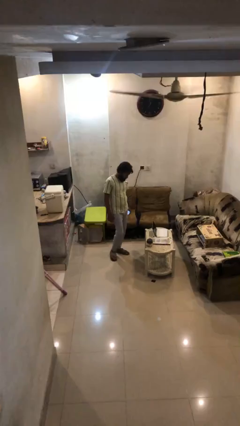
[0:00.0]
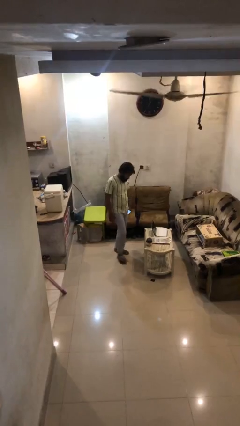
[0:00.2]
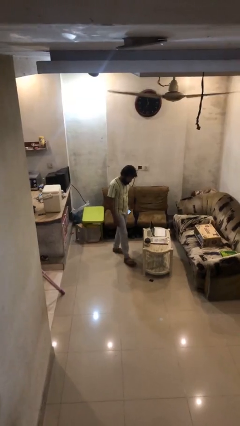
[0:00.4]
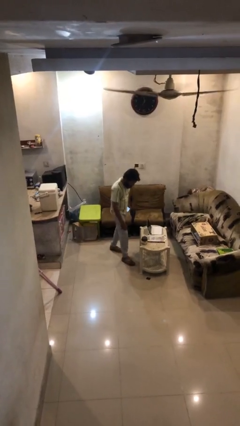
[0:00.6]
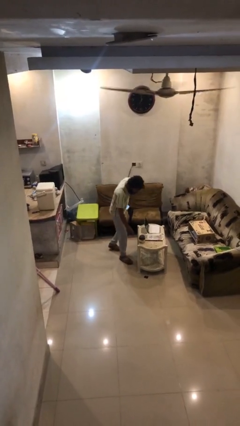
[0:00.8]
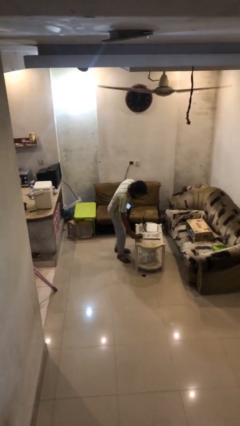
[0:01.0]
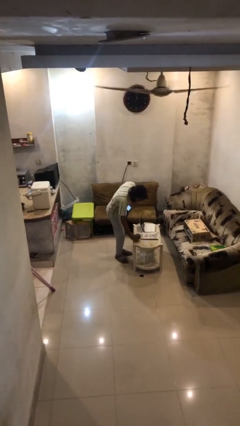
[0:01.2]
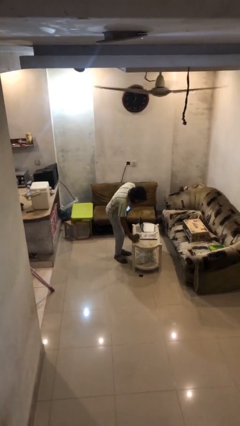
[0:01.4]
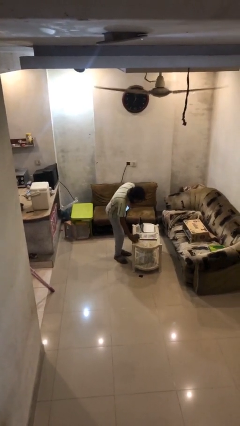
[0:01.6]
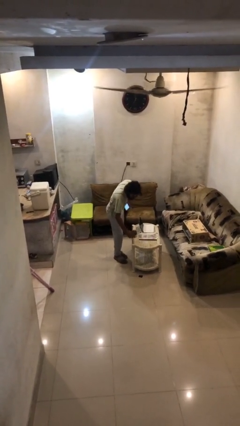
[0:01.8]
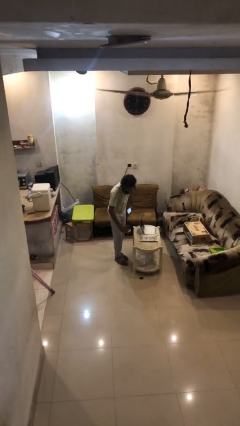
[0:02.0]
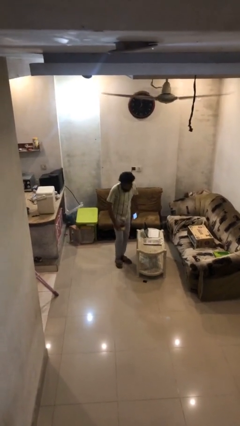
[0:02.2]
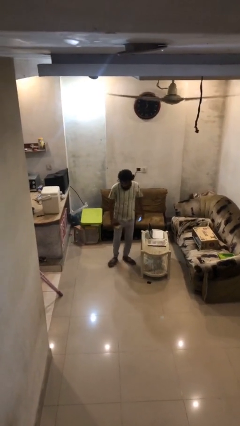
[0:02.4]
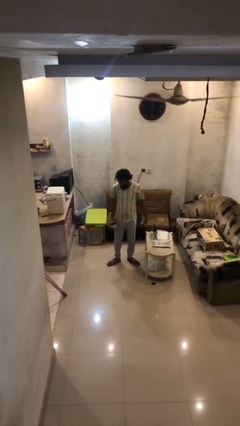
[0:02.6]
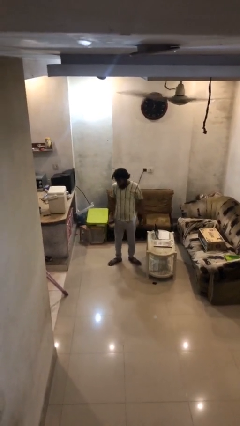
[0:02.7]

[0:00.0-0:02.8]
person picks up object from table

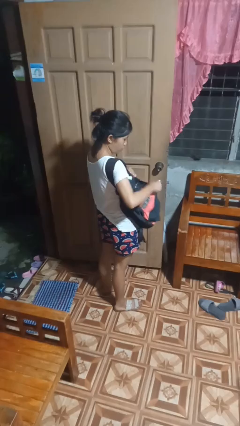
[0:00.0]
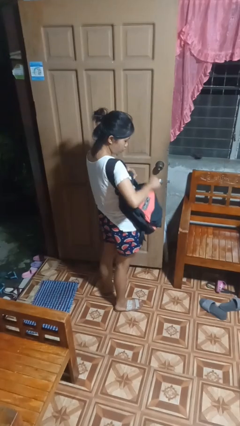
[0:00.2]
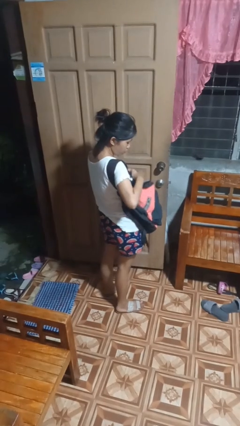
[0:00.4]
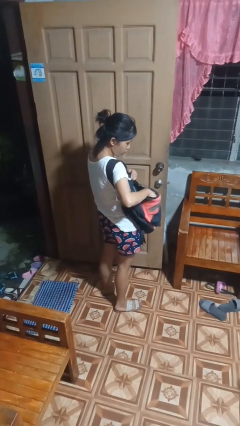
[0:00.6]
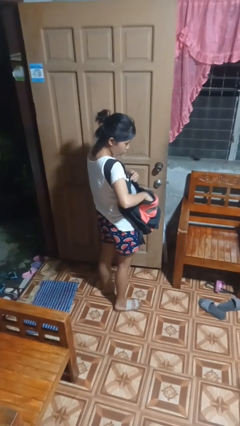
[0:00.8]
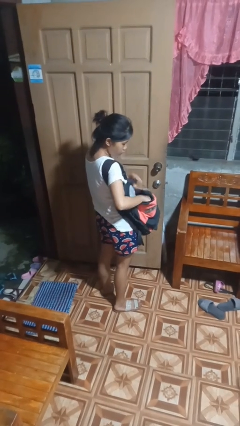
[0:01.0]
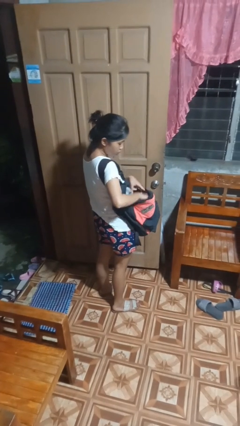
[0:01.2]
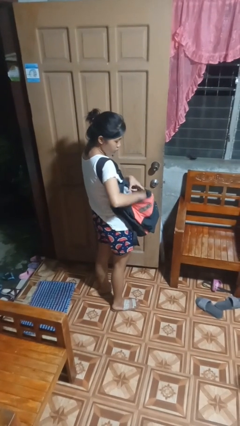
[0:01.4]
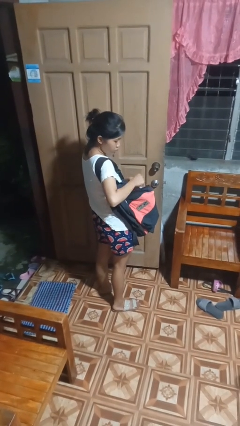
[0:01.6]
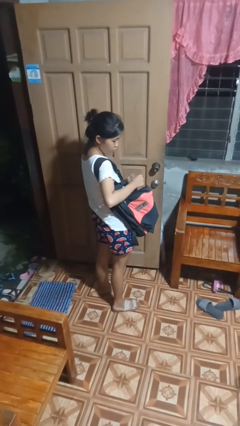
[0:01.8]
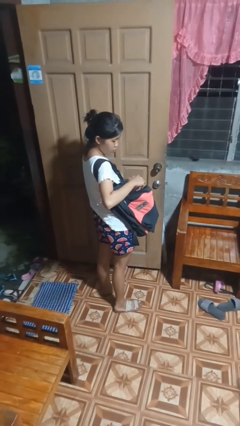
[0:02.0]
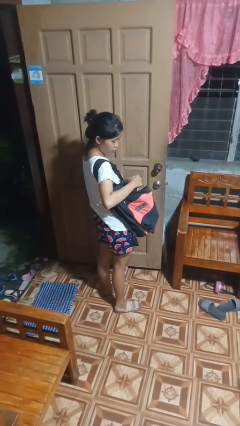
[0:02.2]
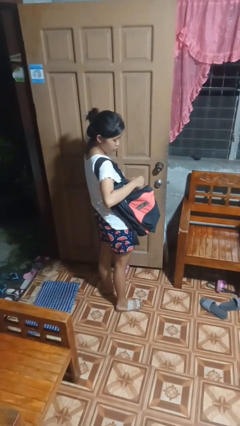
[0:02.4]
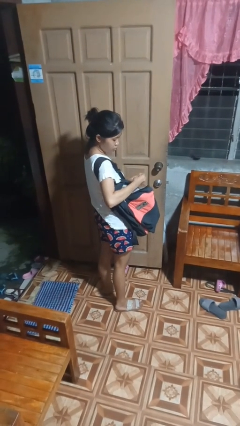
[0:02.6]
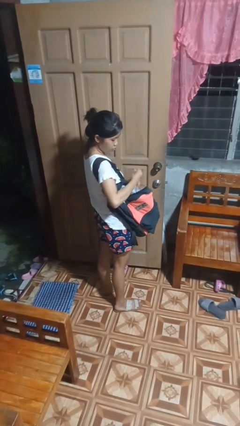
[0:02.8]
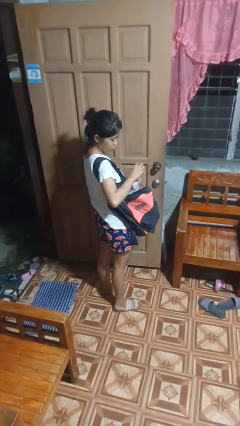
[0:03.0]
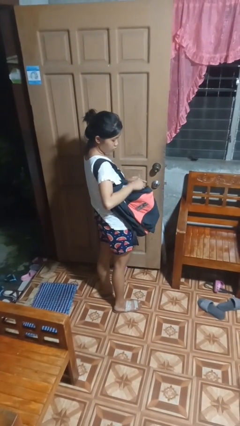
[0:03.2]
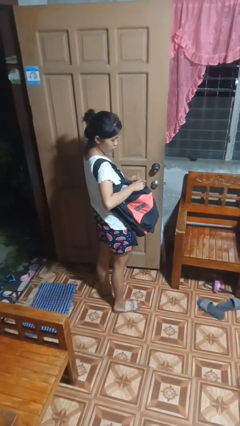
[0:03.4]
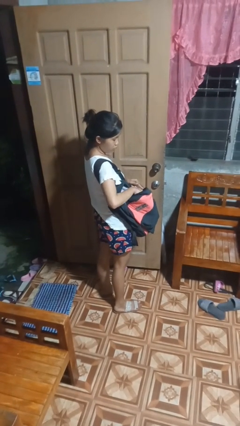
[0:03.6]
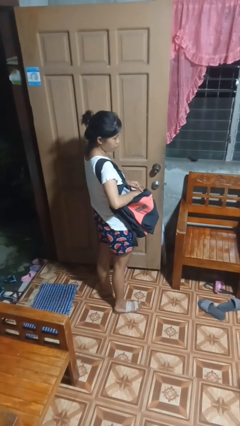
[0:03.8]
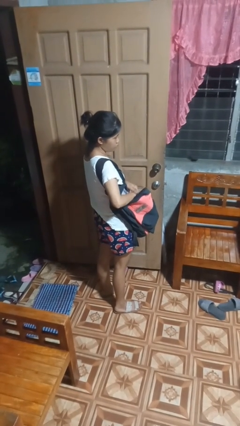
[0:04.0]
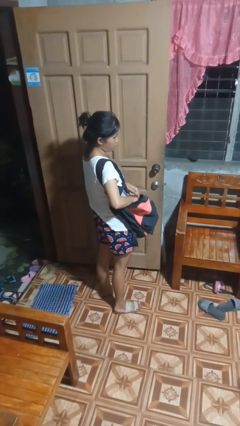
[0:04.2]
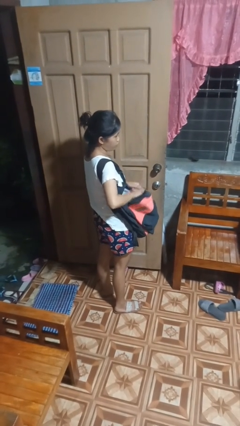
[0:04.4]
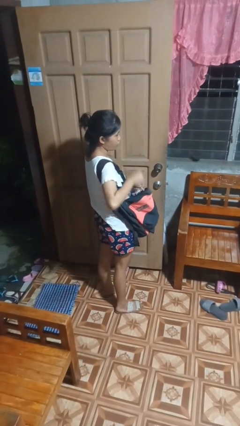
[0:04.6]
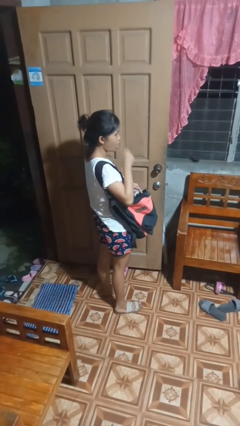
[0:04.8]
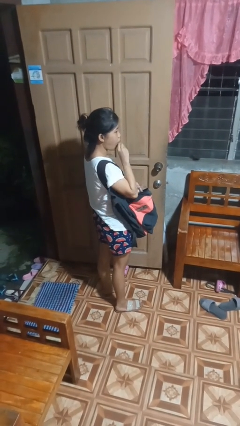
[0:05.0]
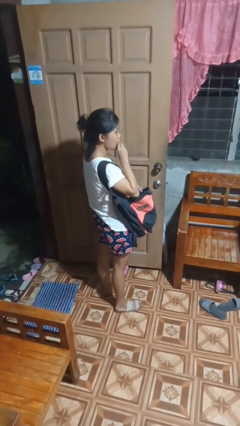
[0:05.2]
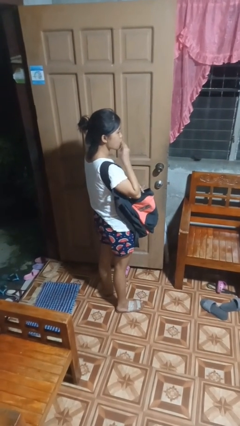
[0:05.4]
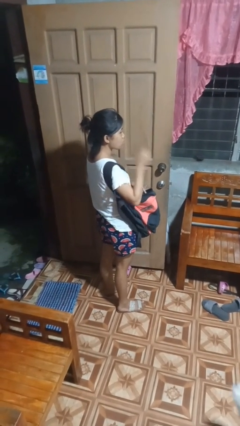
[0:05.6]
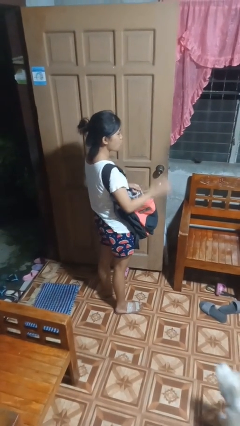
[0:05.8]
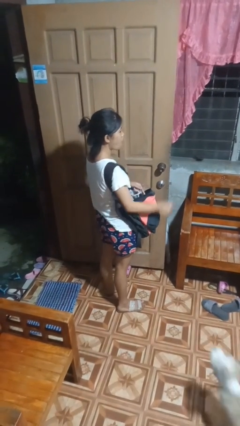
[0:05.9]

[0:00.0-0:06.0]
person eats snack from bag

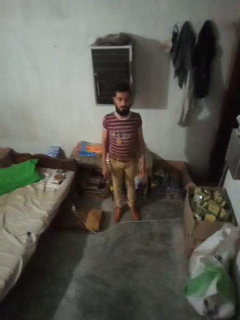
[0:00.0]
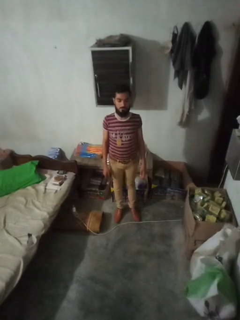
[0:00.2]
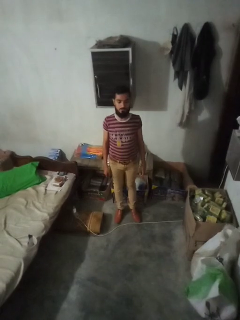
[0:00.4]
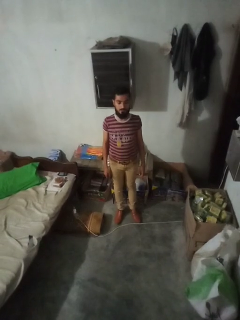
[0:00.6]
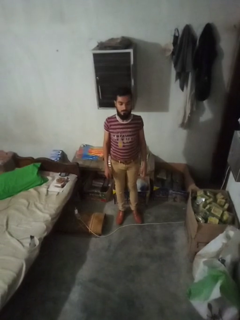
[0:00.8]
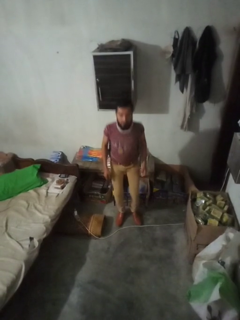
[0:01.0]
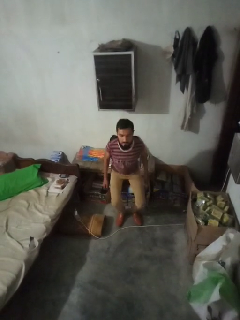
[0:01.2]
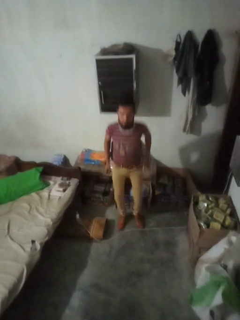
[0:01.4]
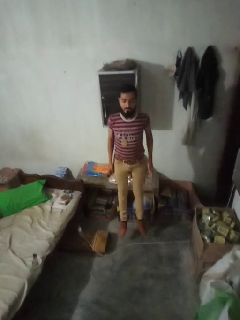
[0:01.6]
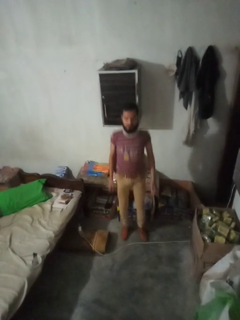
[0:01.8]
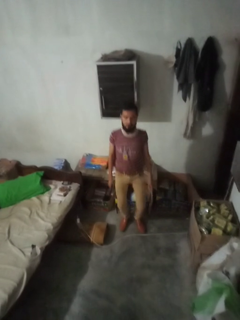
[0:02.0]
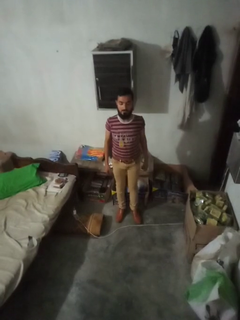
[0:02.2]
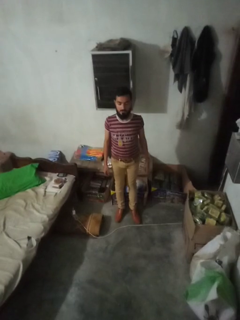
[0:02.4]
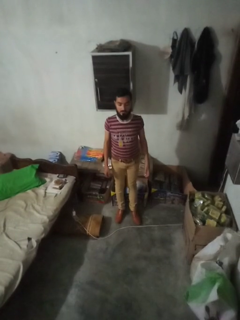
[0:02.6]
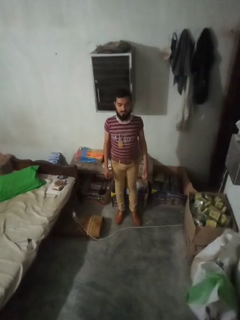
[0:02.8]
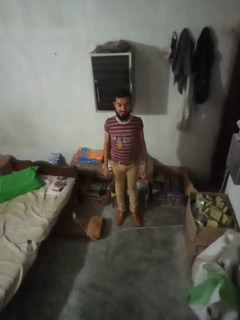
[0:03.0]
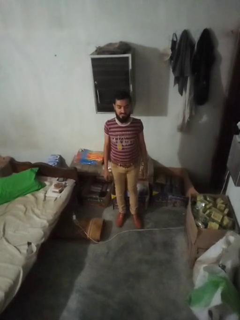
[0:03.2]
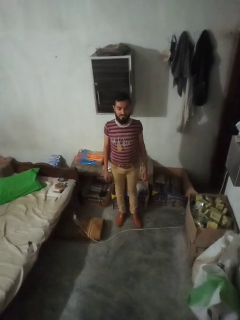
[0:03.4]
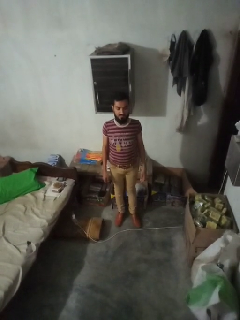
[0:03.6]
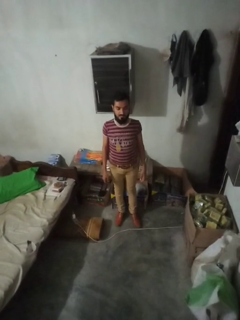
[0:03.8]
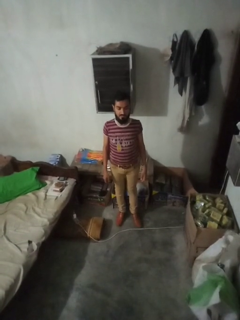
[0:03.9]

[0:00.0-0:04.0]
person jumps

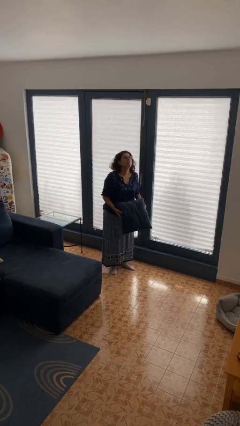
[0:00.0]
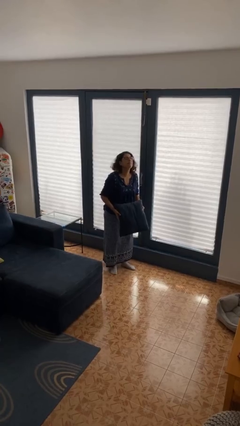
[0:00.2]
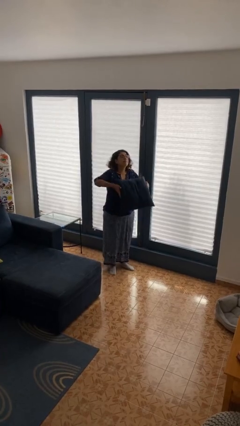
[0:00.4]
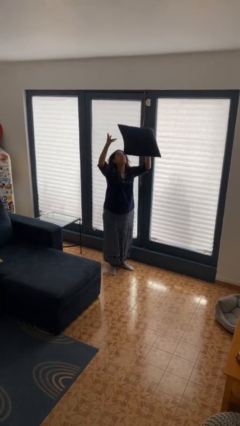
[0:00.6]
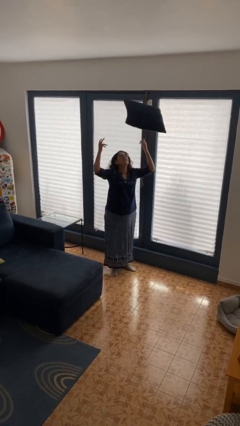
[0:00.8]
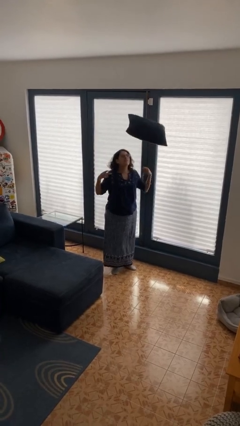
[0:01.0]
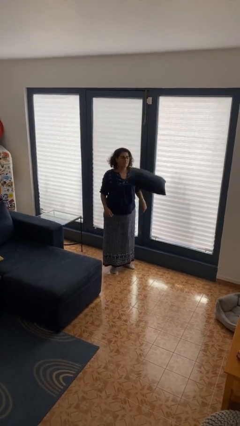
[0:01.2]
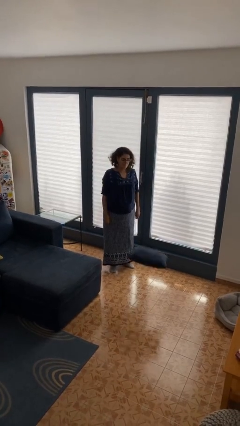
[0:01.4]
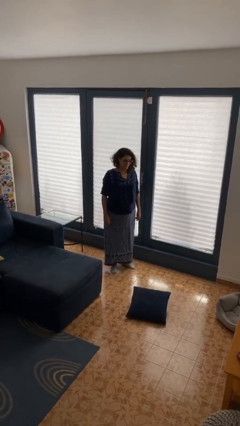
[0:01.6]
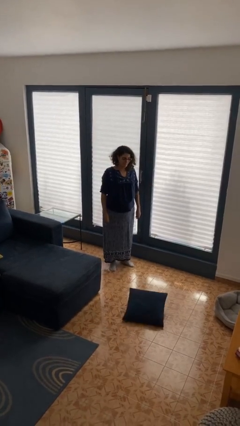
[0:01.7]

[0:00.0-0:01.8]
person throws object into air

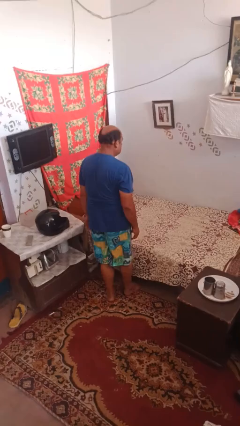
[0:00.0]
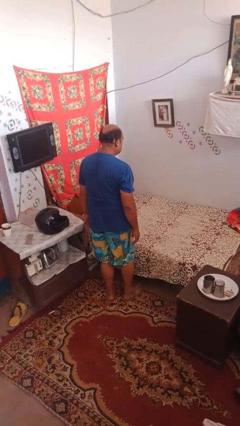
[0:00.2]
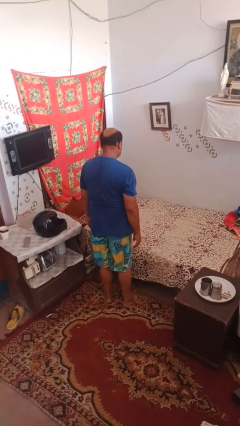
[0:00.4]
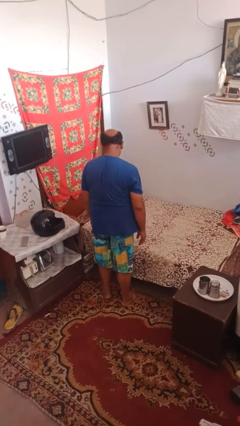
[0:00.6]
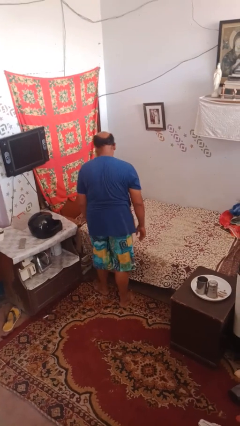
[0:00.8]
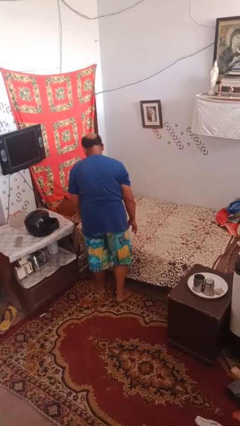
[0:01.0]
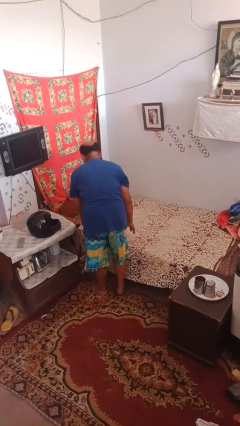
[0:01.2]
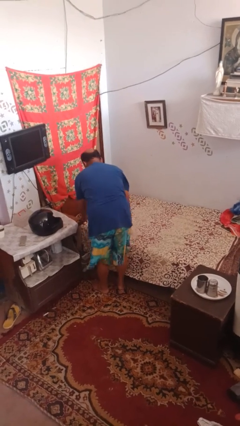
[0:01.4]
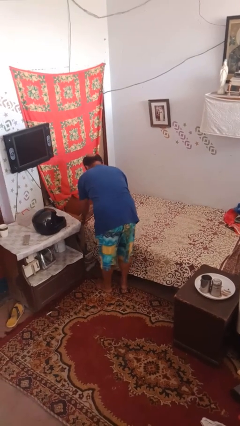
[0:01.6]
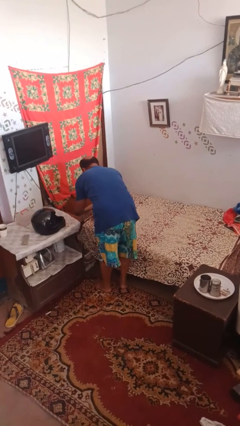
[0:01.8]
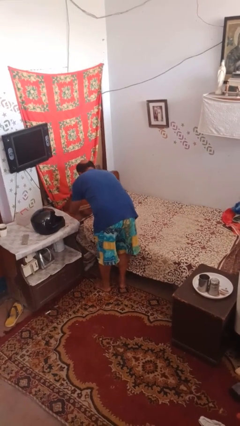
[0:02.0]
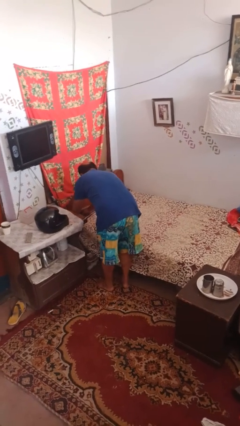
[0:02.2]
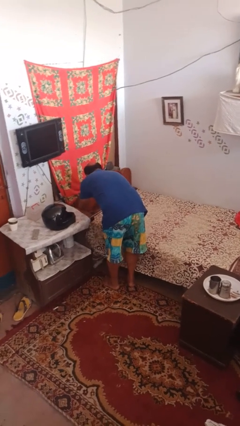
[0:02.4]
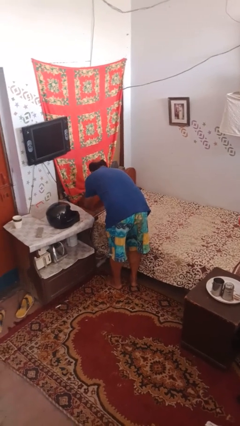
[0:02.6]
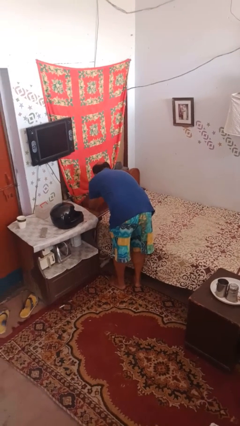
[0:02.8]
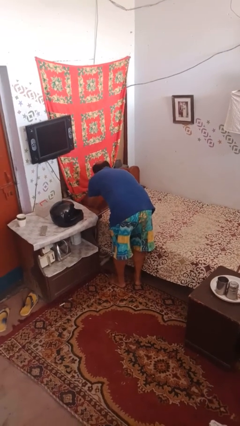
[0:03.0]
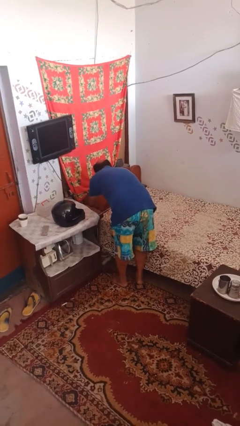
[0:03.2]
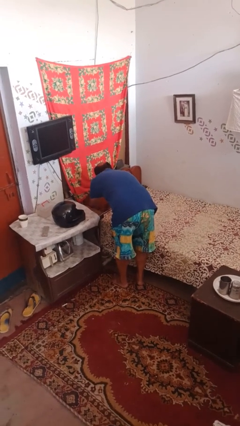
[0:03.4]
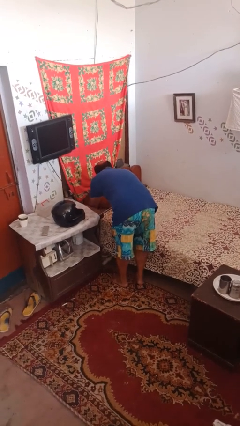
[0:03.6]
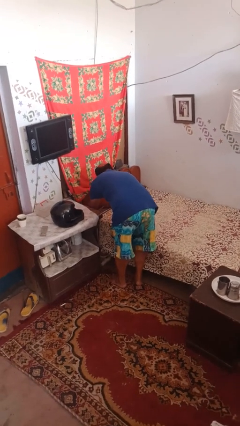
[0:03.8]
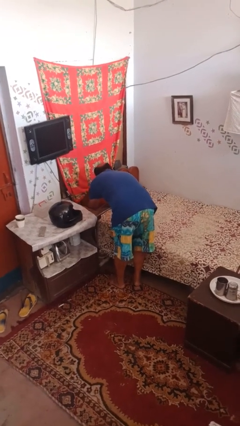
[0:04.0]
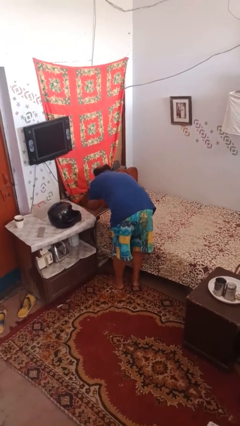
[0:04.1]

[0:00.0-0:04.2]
person makes bed
